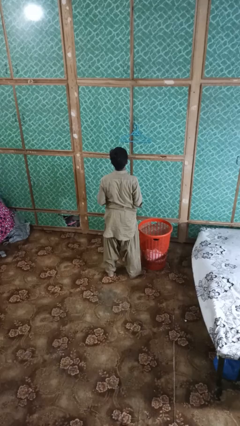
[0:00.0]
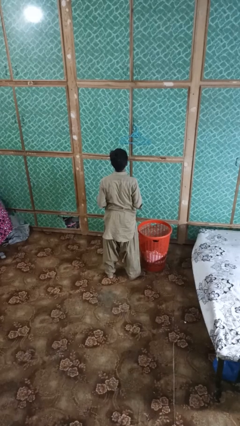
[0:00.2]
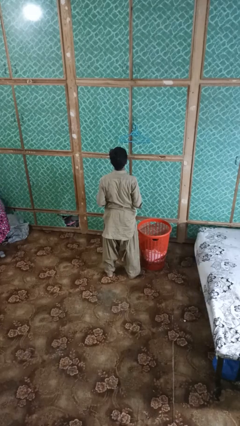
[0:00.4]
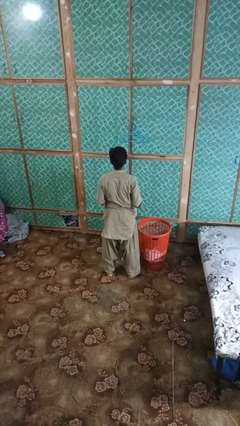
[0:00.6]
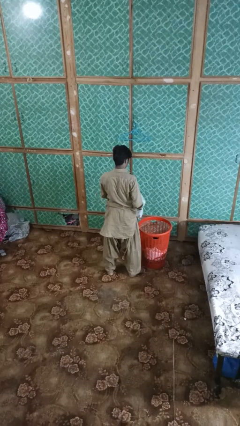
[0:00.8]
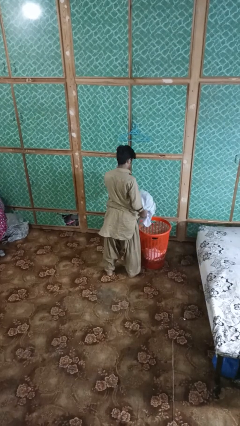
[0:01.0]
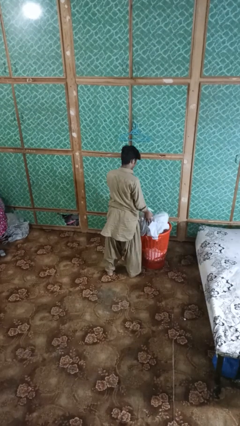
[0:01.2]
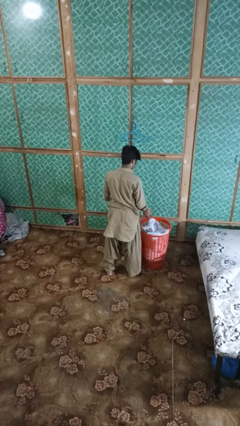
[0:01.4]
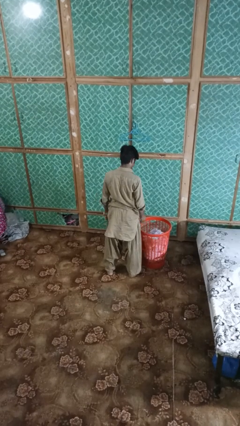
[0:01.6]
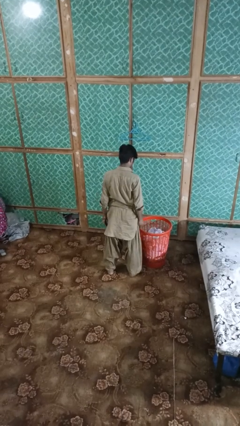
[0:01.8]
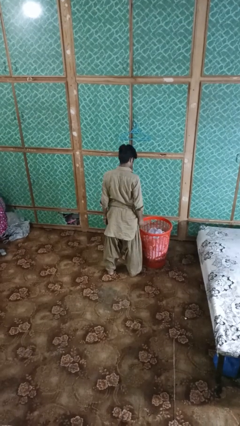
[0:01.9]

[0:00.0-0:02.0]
person puts object into basket

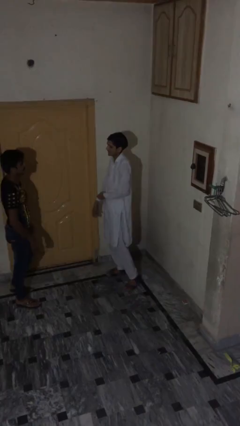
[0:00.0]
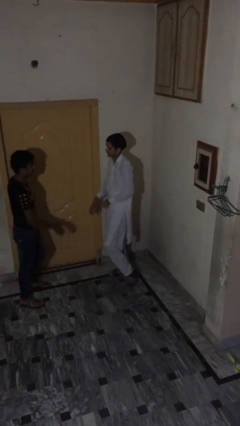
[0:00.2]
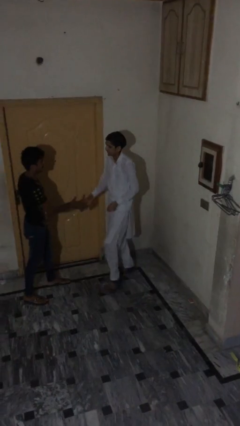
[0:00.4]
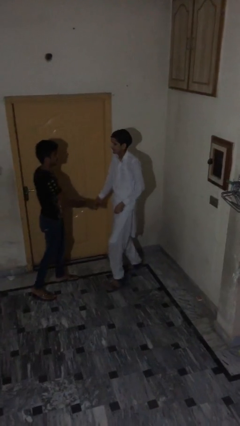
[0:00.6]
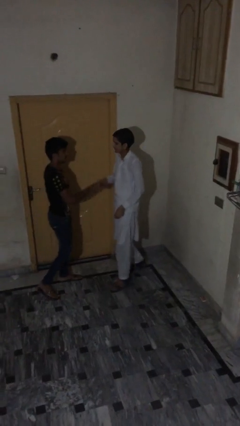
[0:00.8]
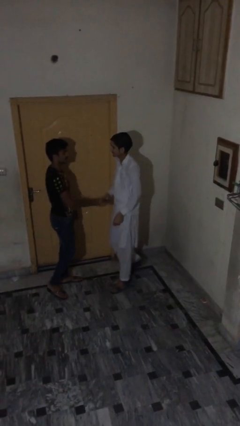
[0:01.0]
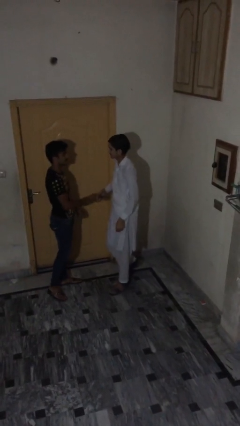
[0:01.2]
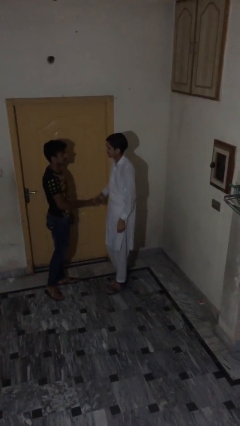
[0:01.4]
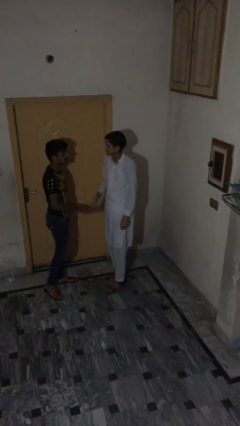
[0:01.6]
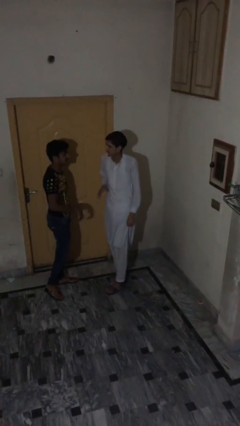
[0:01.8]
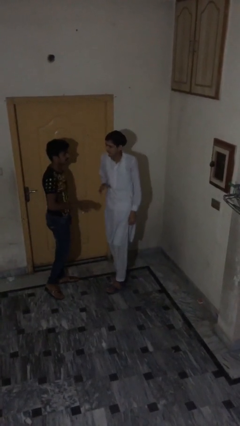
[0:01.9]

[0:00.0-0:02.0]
person shakes hand

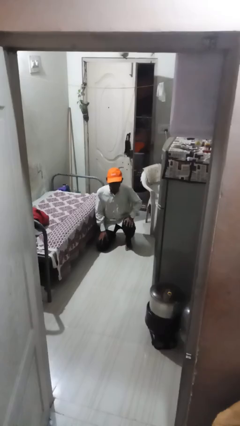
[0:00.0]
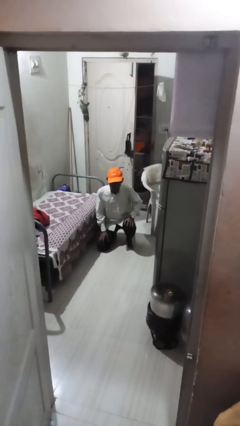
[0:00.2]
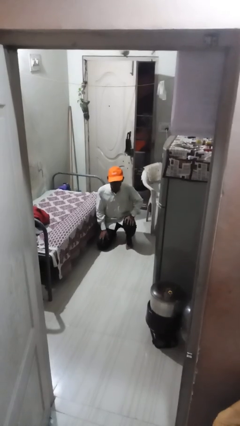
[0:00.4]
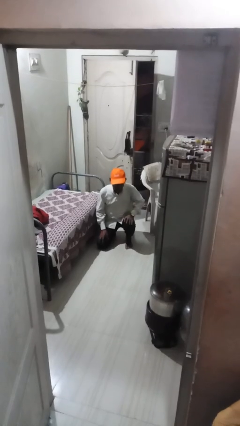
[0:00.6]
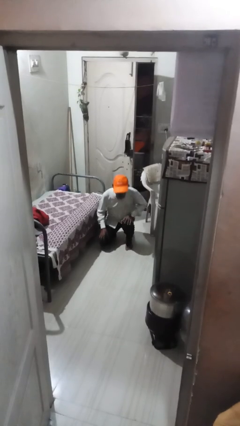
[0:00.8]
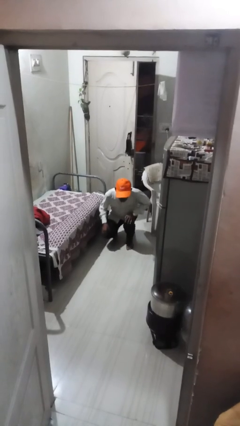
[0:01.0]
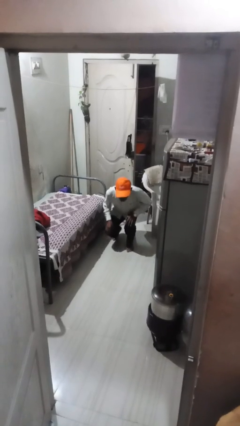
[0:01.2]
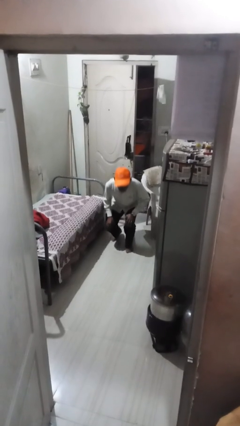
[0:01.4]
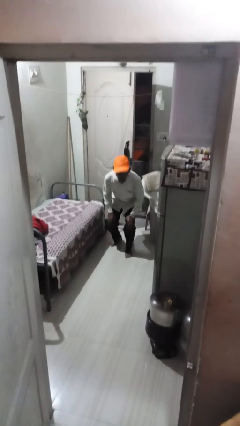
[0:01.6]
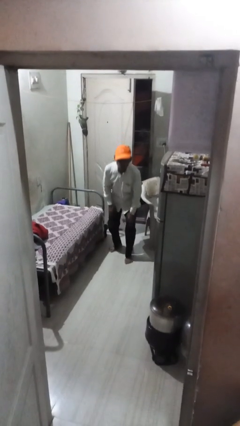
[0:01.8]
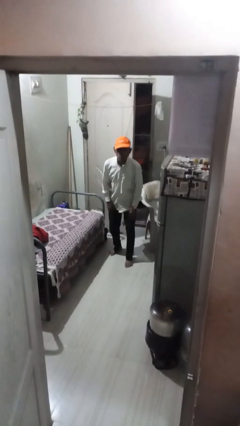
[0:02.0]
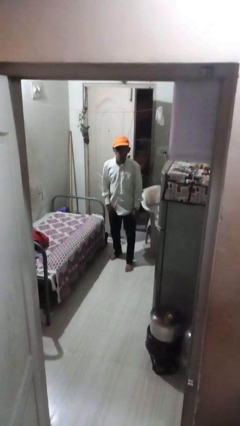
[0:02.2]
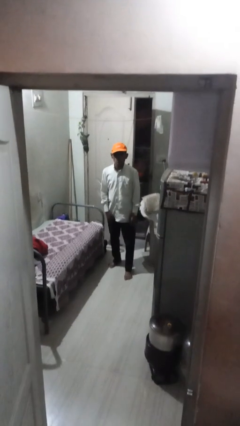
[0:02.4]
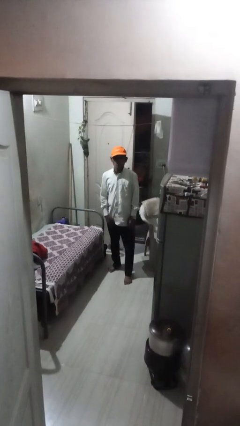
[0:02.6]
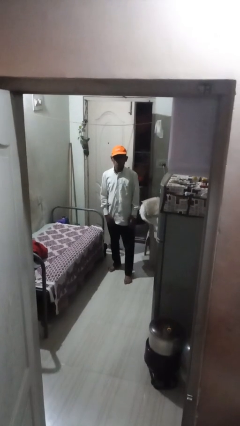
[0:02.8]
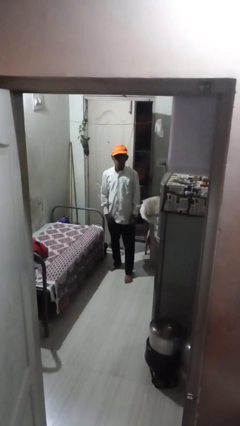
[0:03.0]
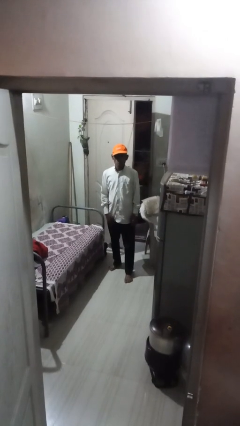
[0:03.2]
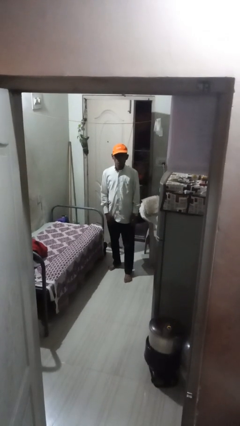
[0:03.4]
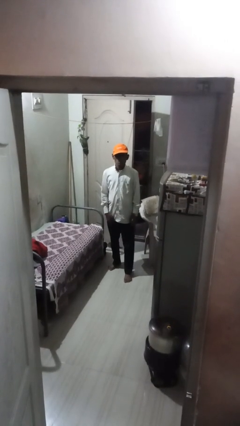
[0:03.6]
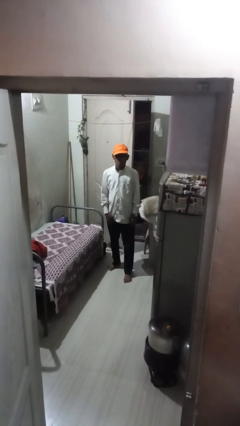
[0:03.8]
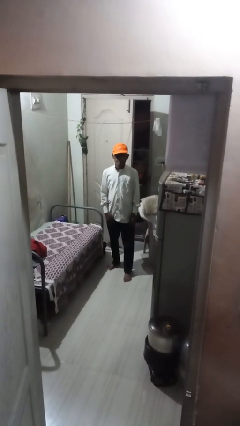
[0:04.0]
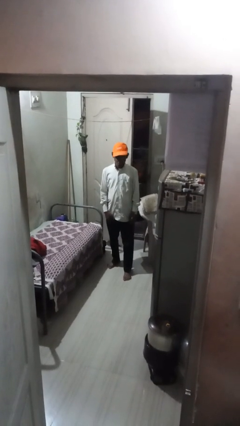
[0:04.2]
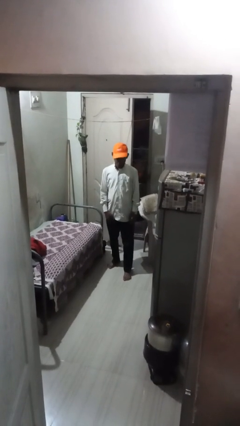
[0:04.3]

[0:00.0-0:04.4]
person stands up from floor

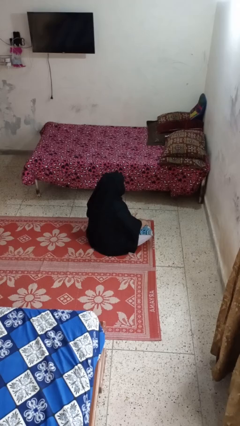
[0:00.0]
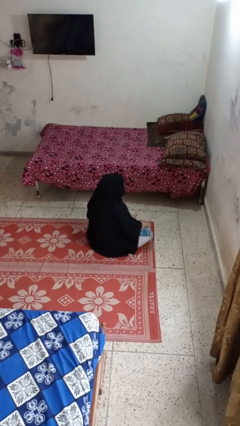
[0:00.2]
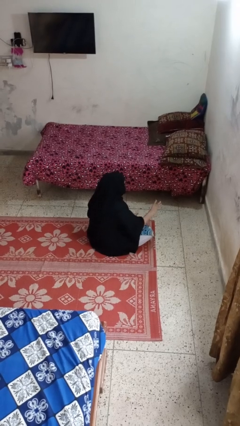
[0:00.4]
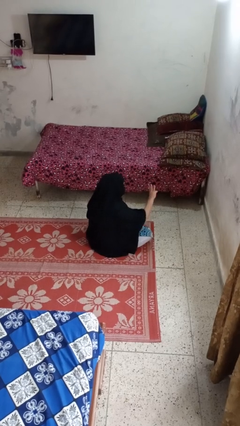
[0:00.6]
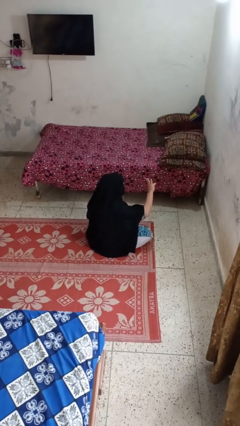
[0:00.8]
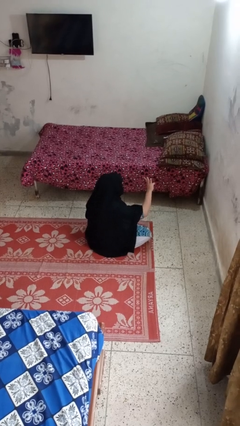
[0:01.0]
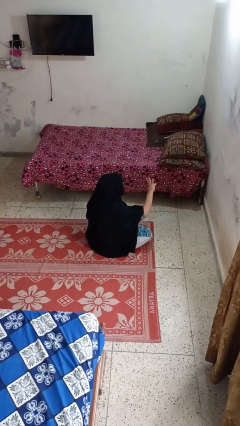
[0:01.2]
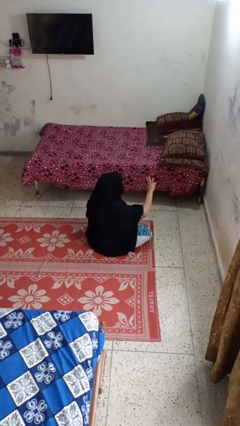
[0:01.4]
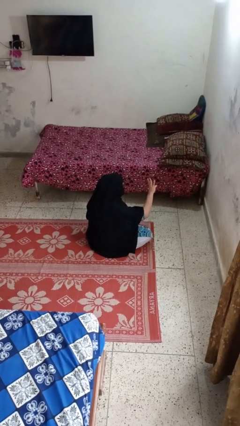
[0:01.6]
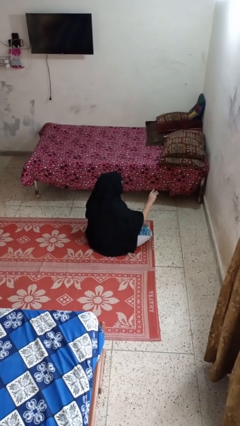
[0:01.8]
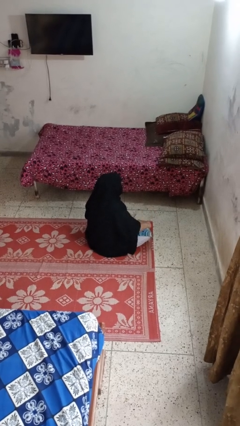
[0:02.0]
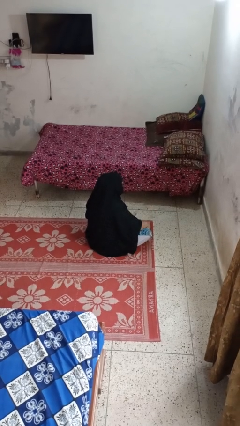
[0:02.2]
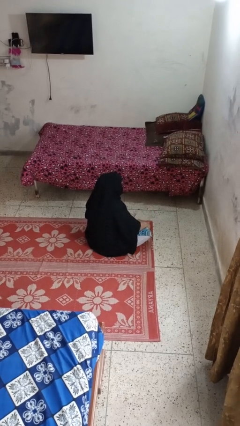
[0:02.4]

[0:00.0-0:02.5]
person gestures number three

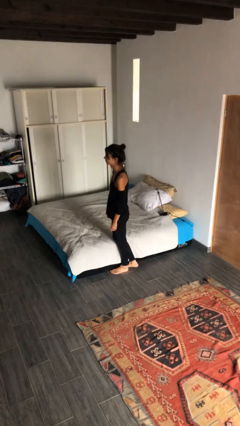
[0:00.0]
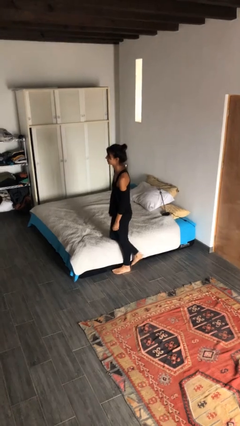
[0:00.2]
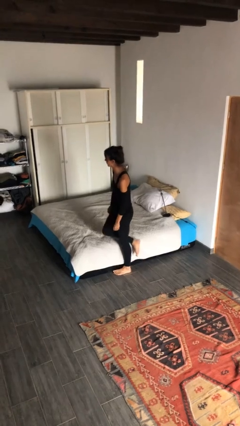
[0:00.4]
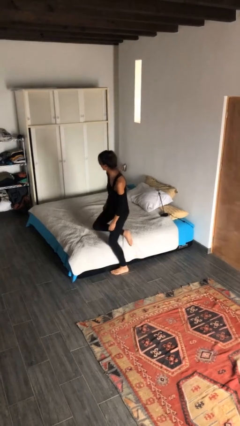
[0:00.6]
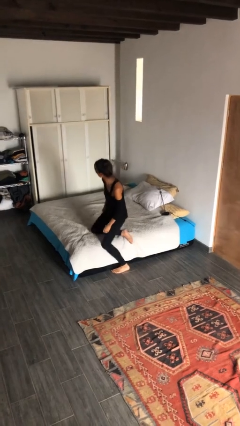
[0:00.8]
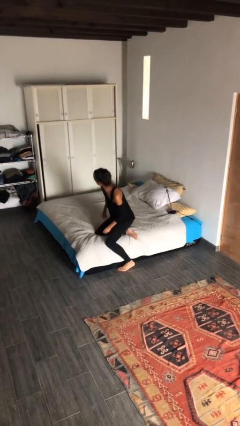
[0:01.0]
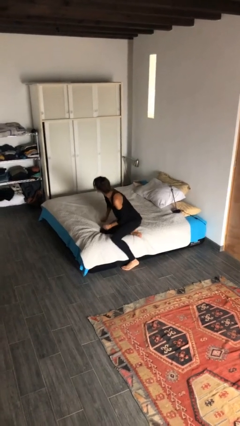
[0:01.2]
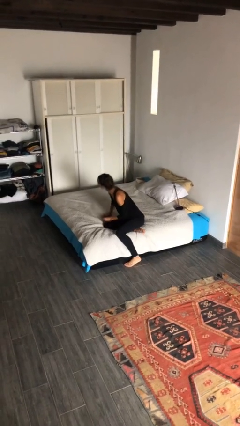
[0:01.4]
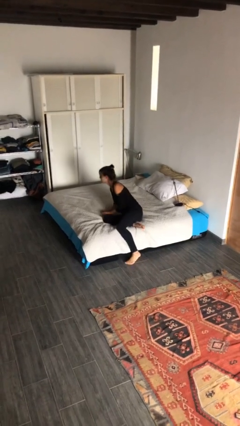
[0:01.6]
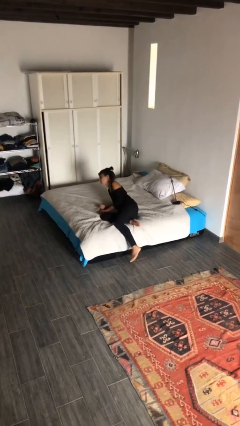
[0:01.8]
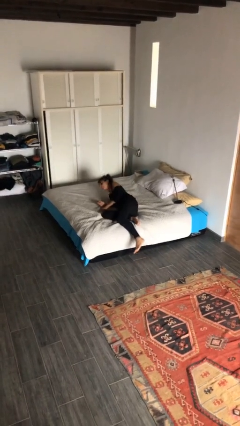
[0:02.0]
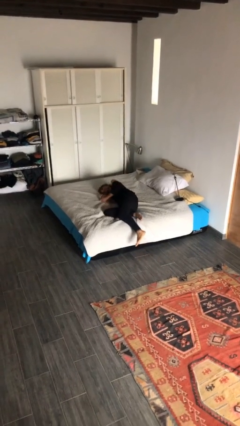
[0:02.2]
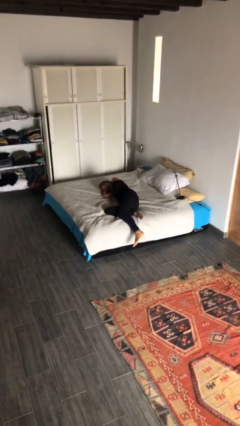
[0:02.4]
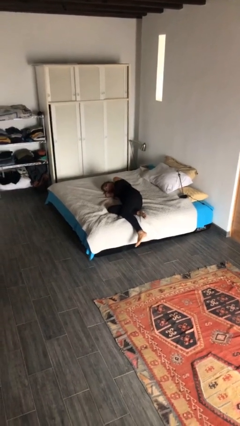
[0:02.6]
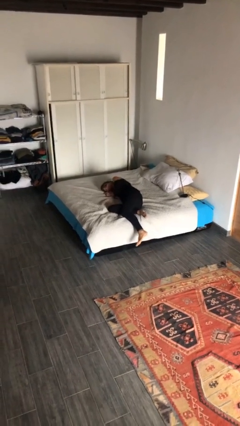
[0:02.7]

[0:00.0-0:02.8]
person lies down on bed

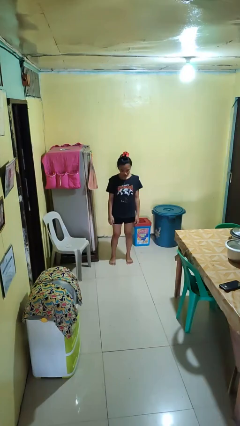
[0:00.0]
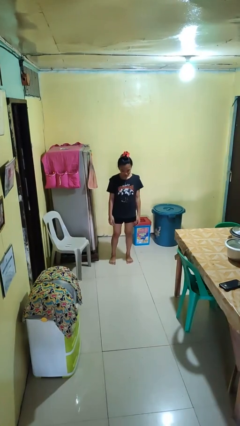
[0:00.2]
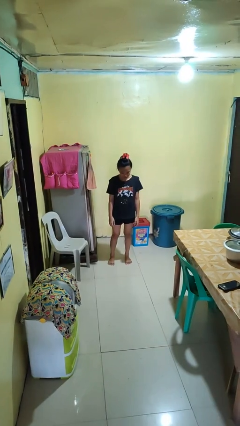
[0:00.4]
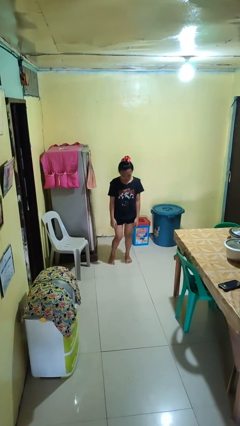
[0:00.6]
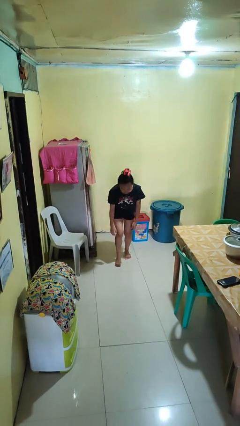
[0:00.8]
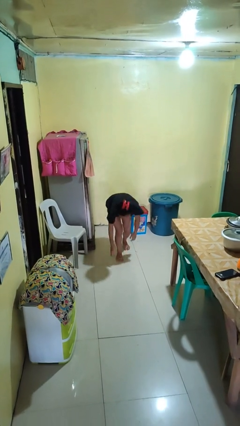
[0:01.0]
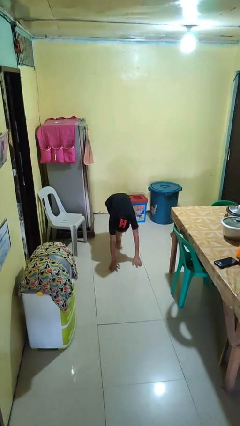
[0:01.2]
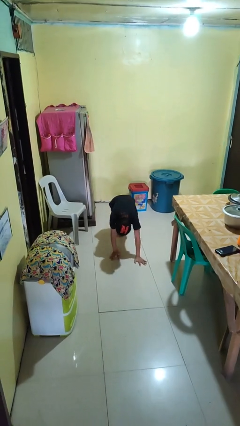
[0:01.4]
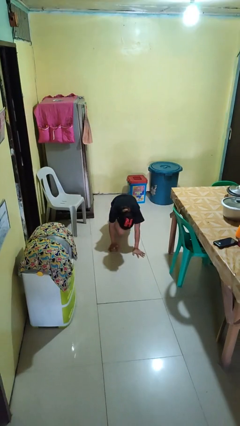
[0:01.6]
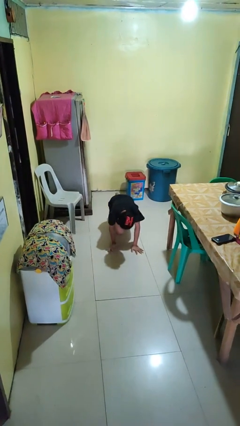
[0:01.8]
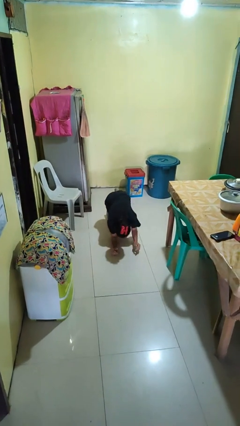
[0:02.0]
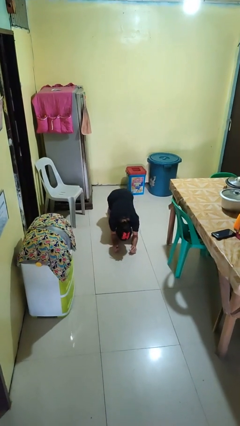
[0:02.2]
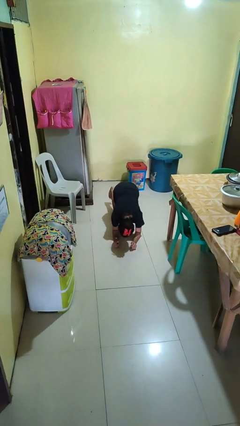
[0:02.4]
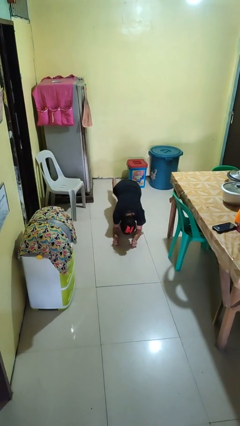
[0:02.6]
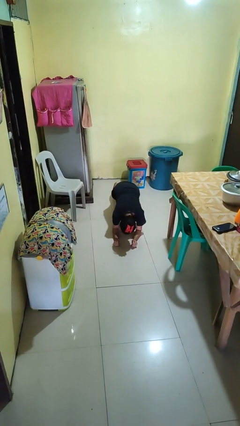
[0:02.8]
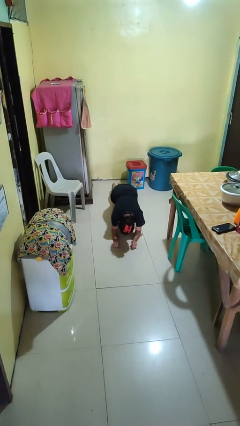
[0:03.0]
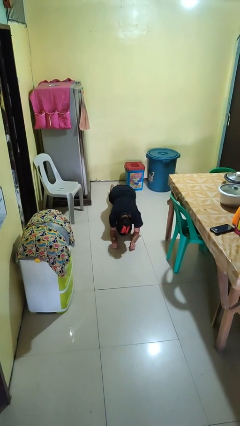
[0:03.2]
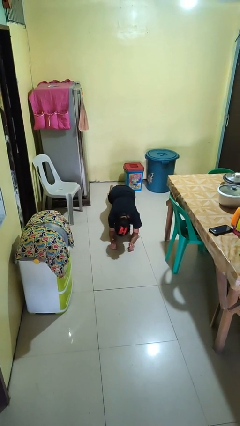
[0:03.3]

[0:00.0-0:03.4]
person exercises with plank

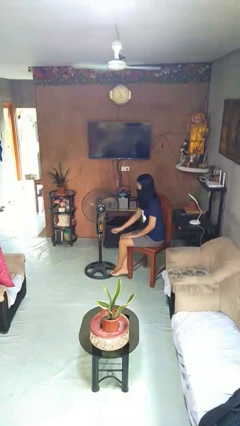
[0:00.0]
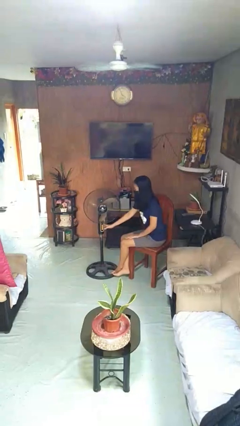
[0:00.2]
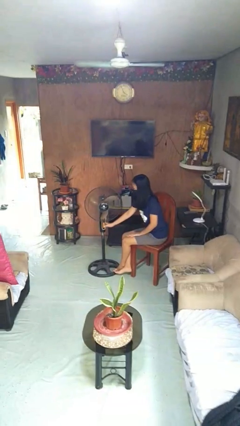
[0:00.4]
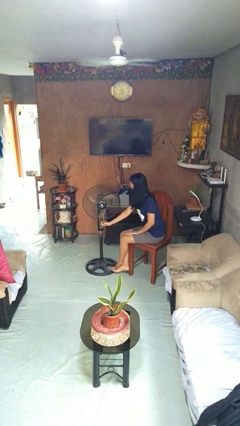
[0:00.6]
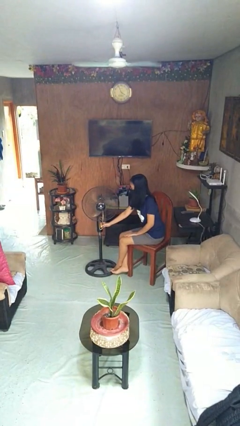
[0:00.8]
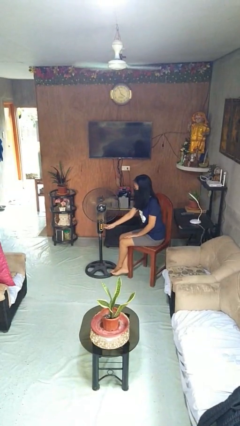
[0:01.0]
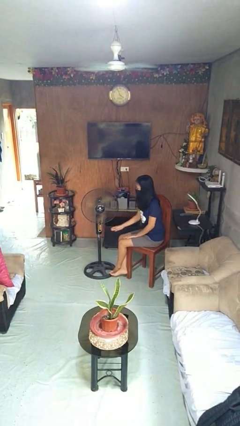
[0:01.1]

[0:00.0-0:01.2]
person turns on fan
